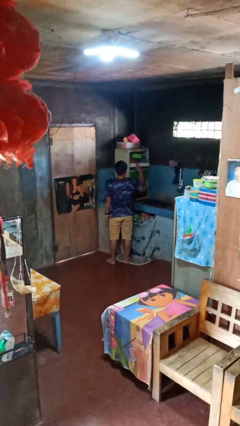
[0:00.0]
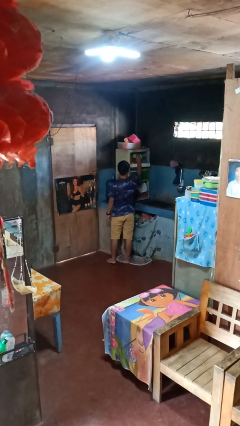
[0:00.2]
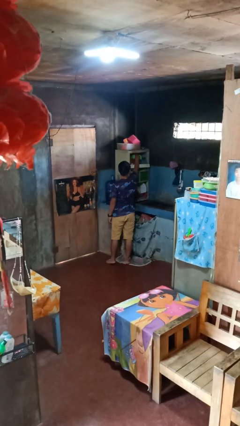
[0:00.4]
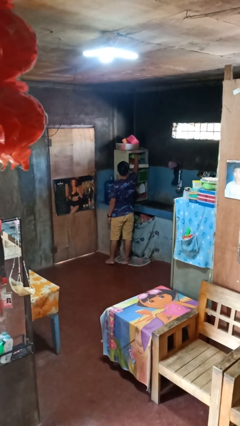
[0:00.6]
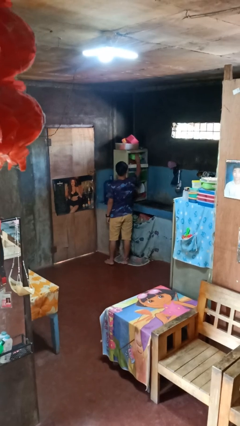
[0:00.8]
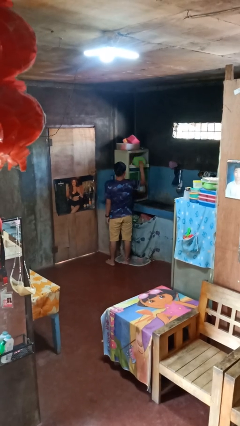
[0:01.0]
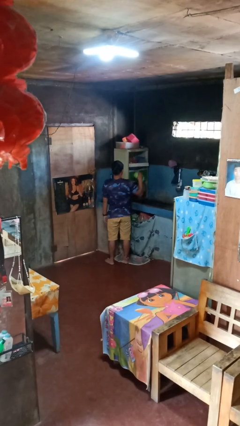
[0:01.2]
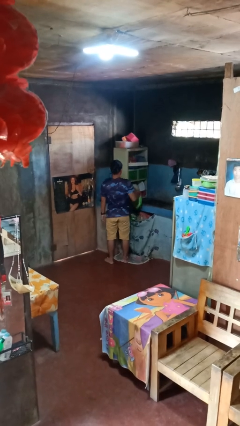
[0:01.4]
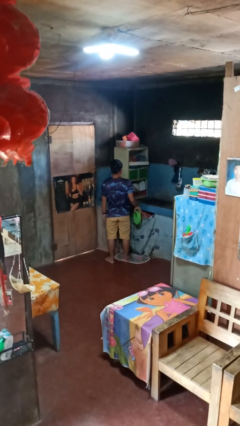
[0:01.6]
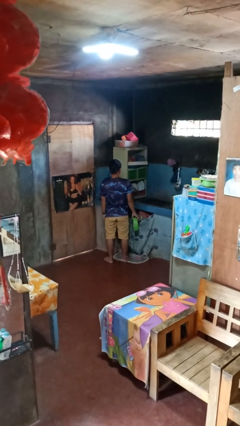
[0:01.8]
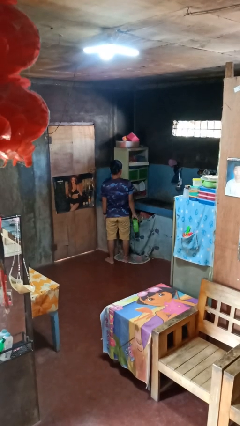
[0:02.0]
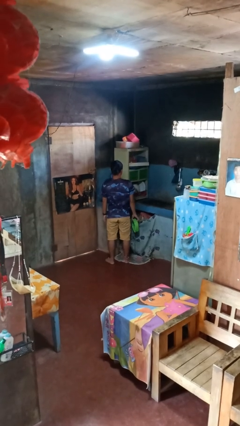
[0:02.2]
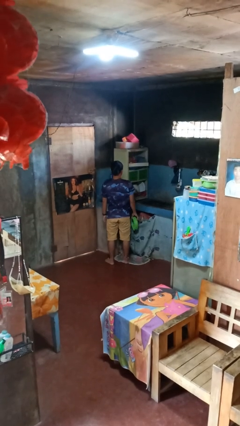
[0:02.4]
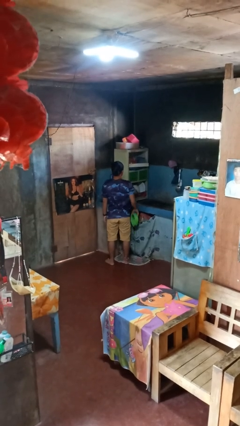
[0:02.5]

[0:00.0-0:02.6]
person takes object from cabinet

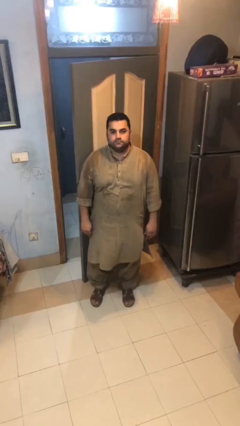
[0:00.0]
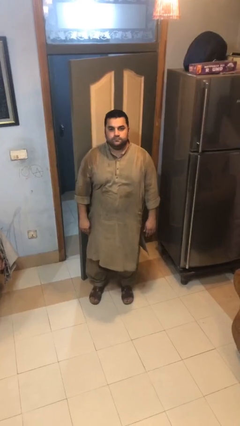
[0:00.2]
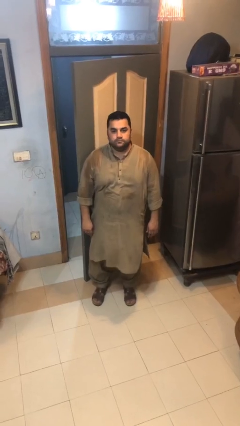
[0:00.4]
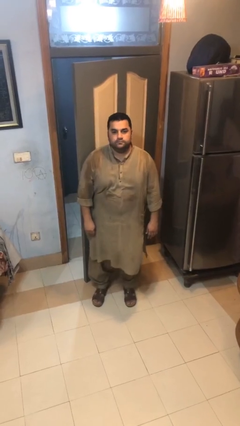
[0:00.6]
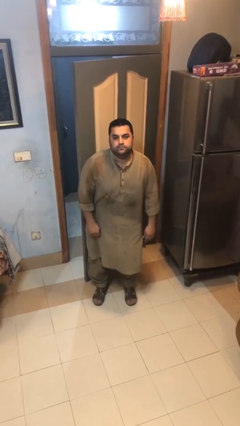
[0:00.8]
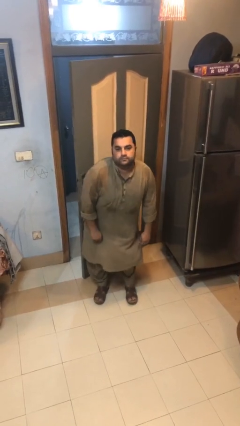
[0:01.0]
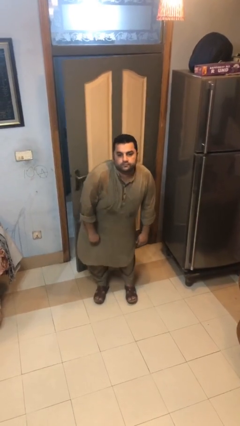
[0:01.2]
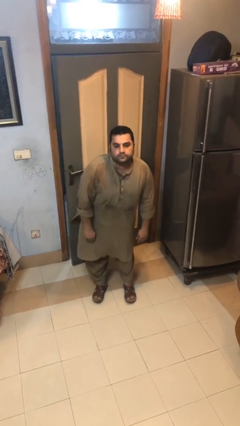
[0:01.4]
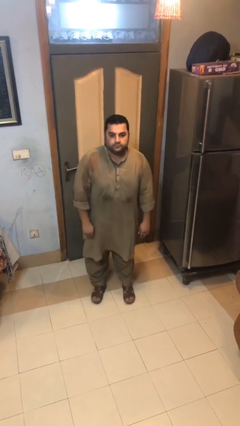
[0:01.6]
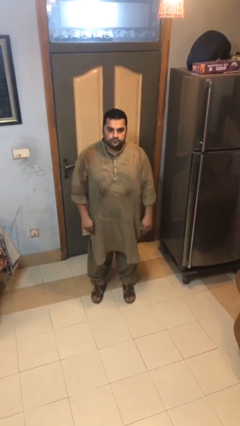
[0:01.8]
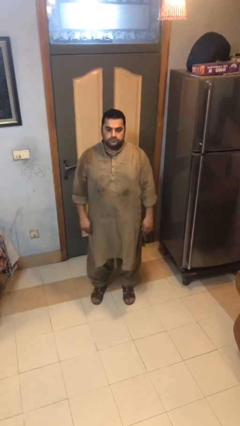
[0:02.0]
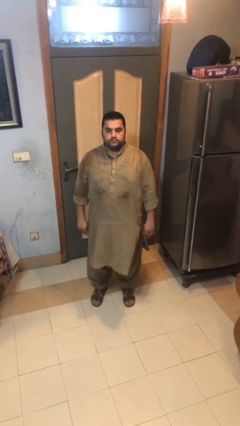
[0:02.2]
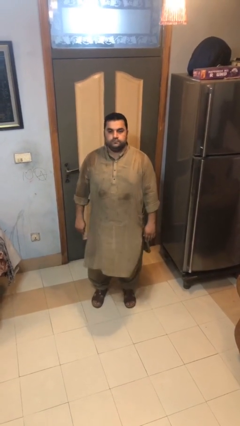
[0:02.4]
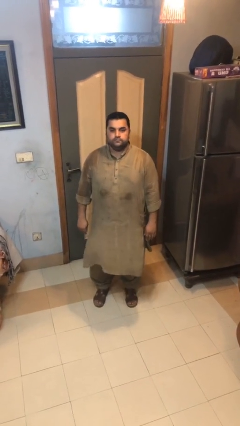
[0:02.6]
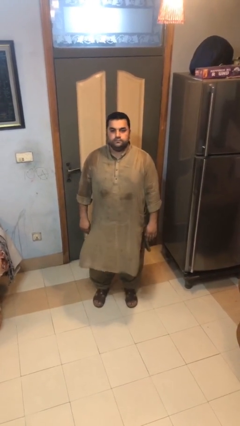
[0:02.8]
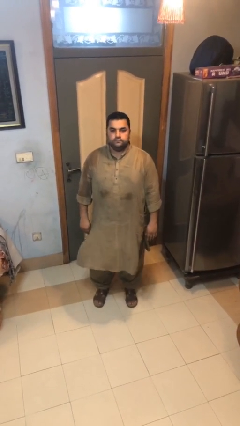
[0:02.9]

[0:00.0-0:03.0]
person closes door with hip

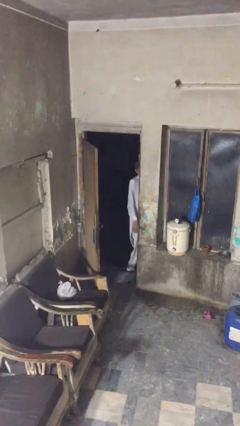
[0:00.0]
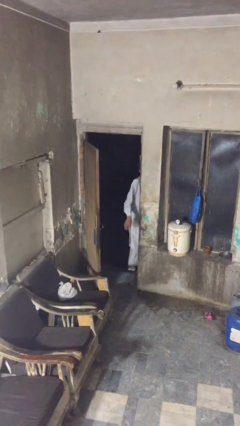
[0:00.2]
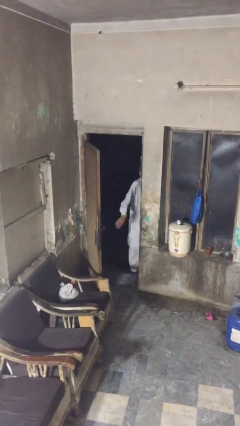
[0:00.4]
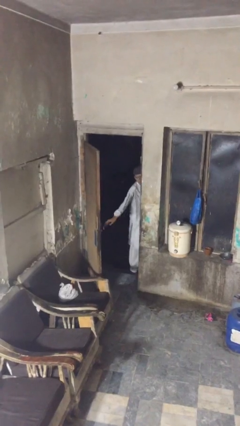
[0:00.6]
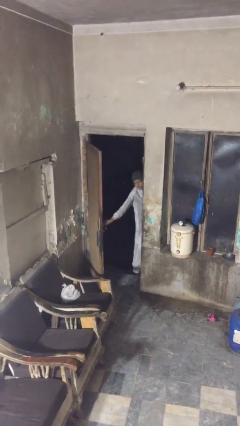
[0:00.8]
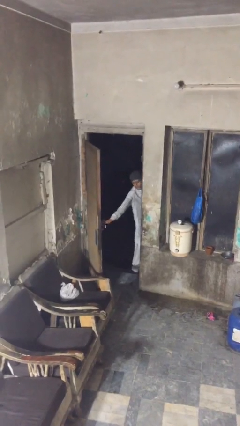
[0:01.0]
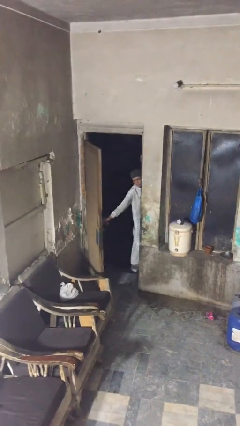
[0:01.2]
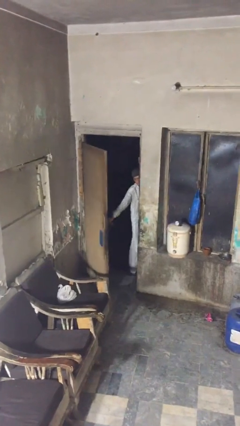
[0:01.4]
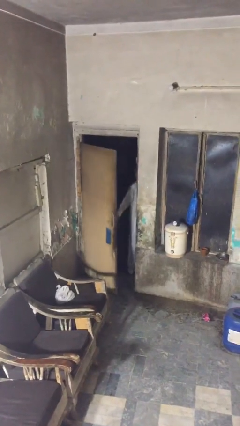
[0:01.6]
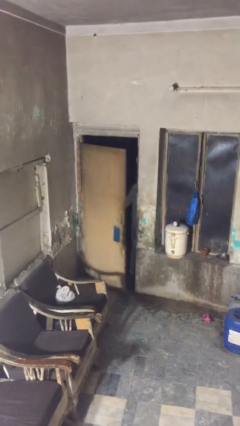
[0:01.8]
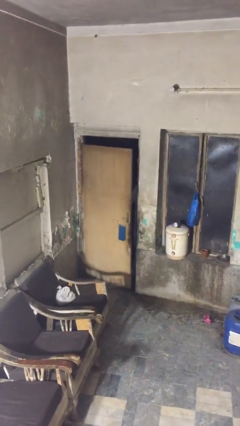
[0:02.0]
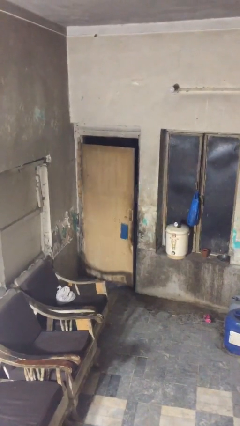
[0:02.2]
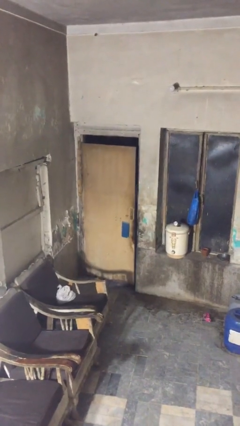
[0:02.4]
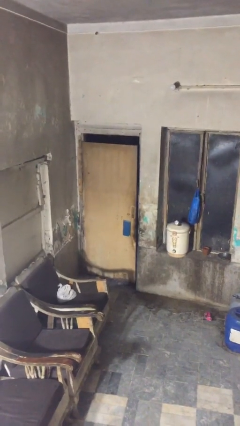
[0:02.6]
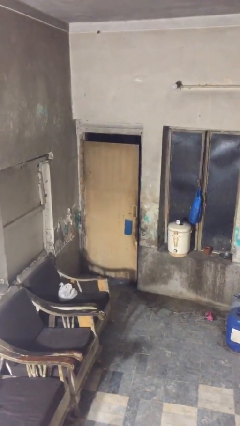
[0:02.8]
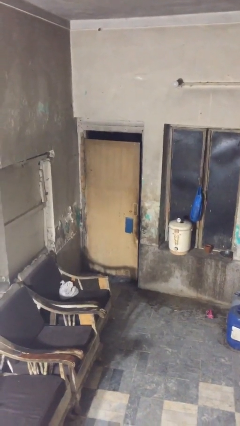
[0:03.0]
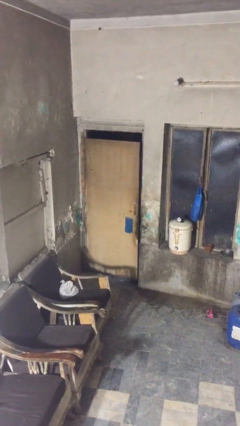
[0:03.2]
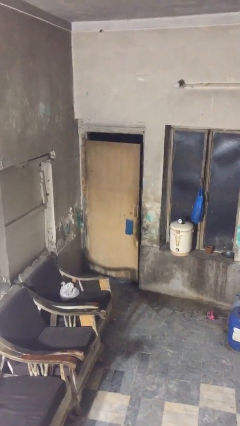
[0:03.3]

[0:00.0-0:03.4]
person closes facility door

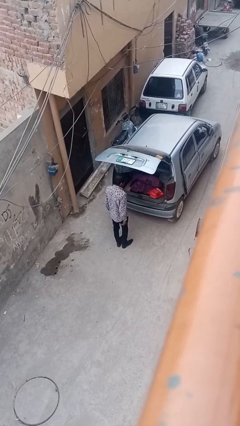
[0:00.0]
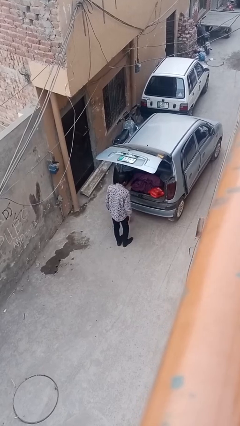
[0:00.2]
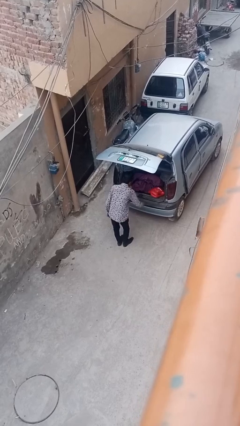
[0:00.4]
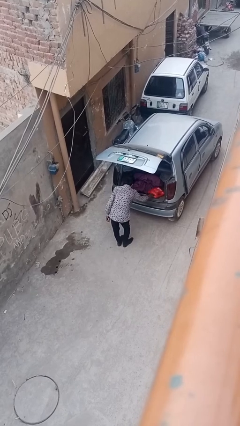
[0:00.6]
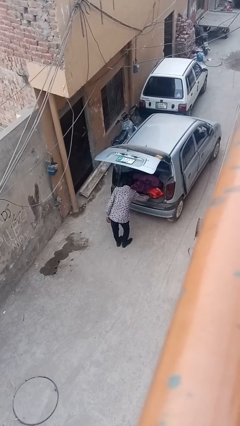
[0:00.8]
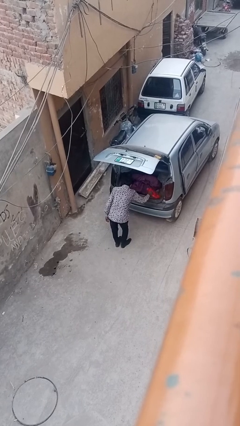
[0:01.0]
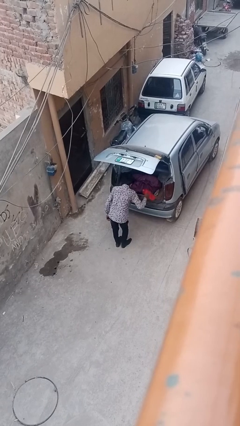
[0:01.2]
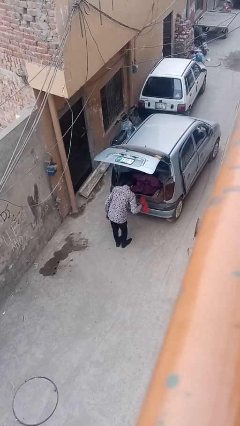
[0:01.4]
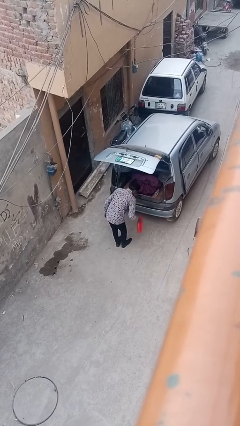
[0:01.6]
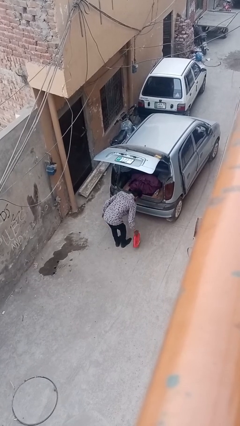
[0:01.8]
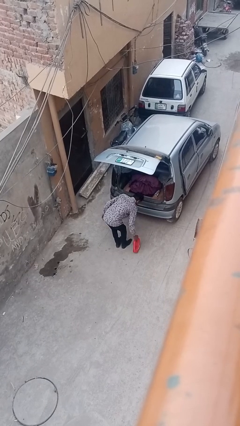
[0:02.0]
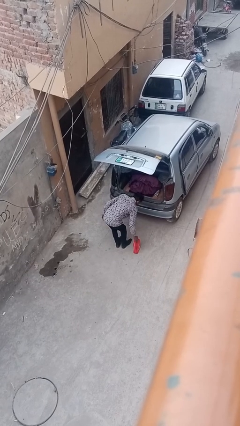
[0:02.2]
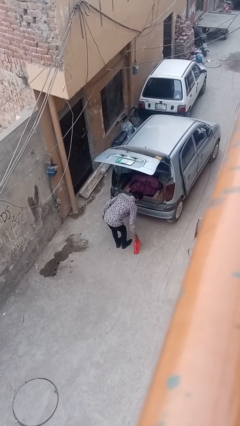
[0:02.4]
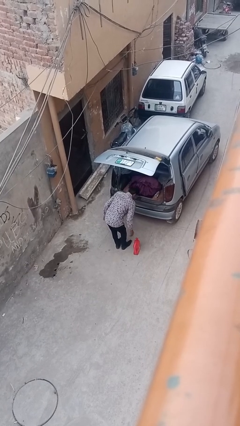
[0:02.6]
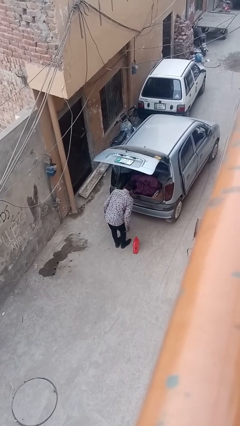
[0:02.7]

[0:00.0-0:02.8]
person unloads car

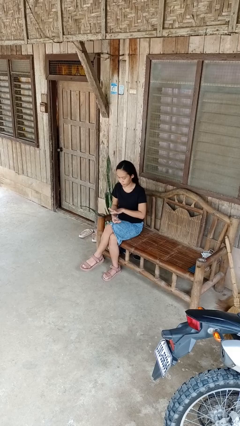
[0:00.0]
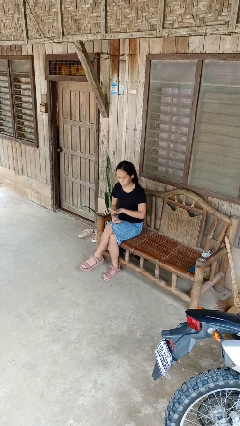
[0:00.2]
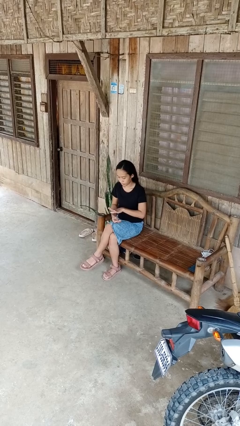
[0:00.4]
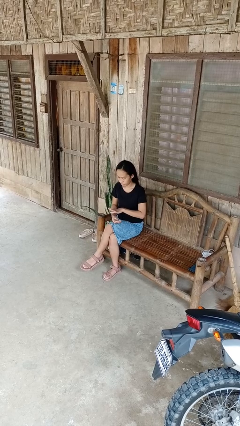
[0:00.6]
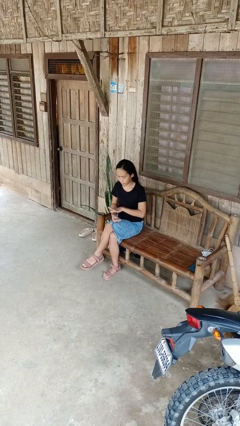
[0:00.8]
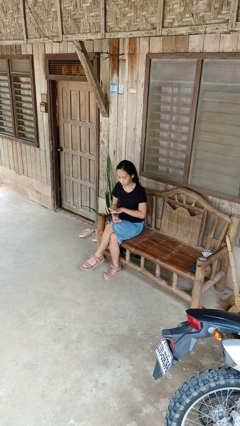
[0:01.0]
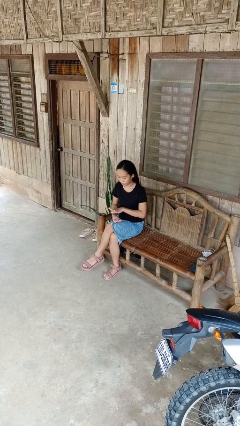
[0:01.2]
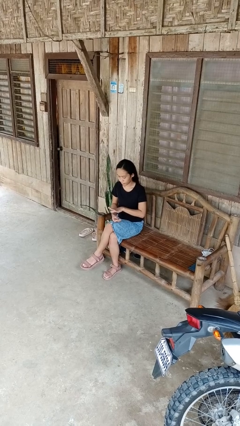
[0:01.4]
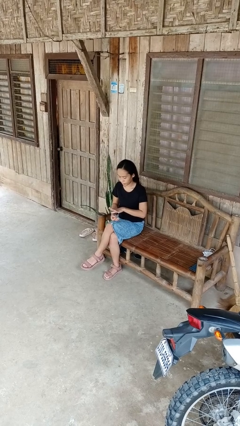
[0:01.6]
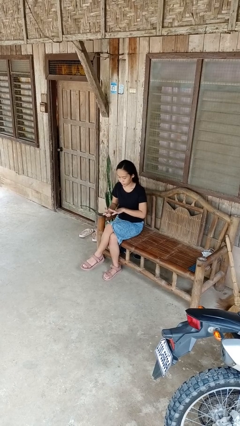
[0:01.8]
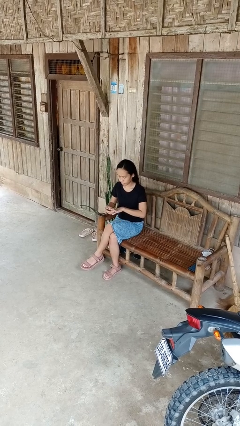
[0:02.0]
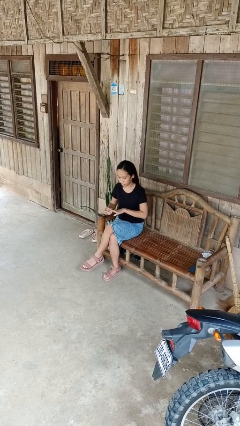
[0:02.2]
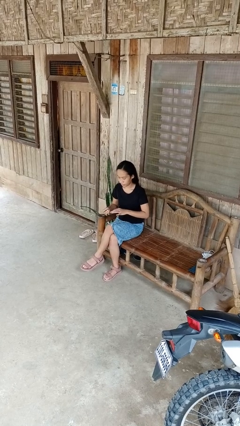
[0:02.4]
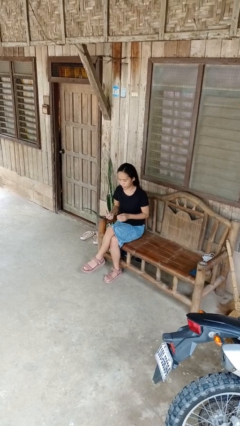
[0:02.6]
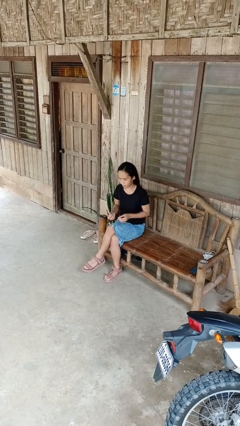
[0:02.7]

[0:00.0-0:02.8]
person puts on ring

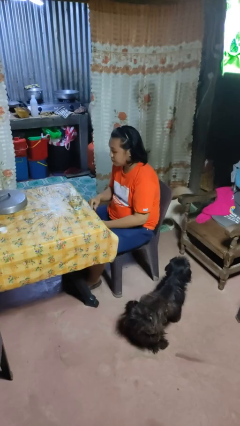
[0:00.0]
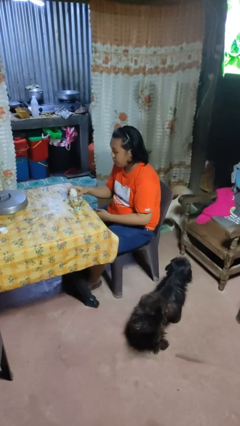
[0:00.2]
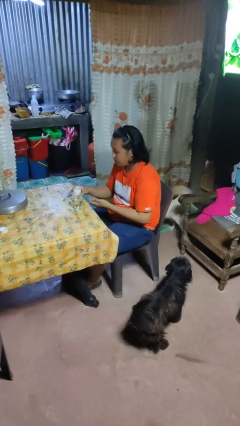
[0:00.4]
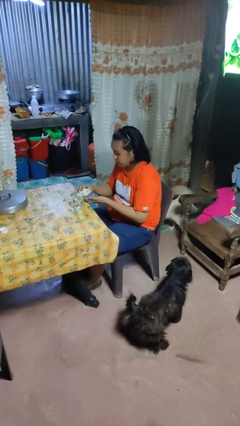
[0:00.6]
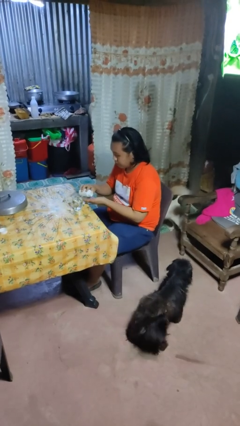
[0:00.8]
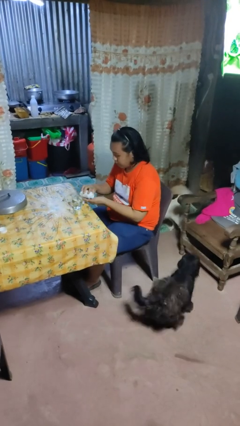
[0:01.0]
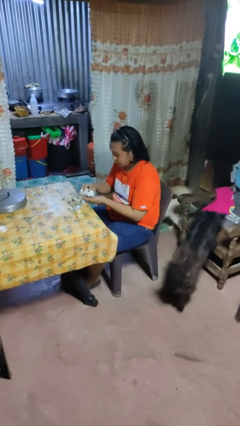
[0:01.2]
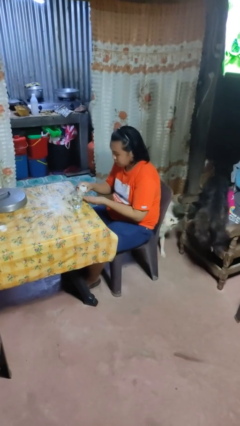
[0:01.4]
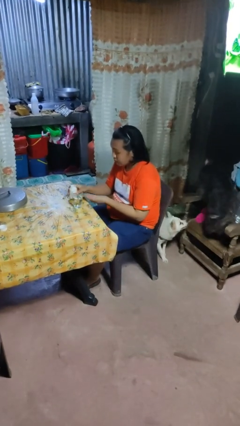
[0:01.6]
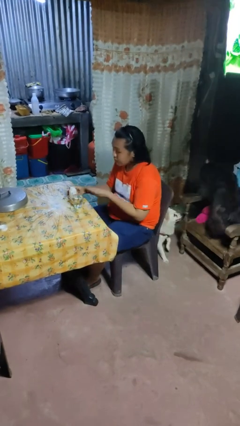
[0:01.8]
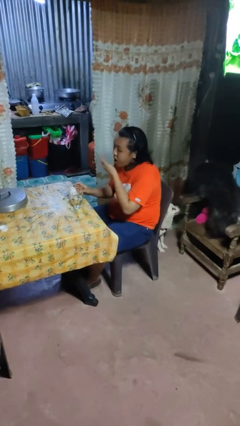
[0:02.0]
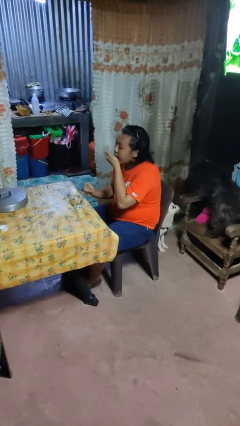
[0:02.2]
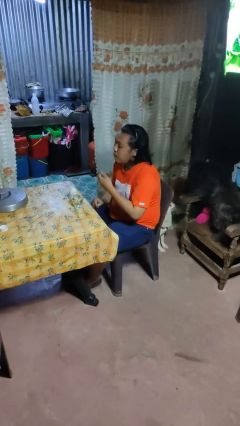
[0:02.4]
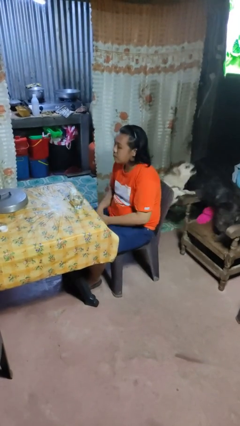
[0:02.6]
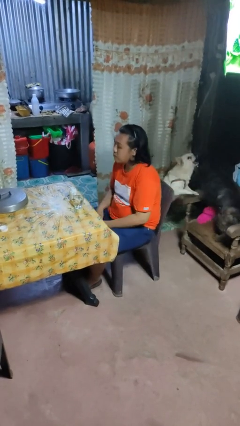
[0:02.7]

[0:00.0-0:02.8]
person takes medicine pills
